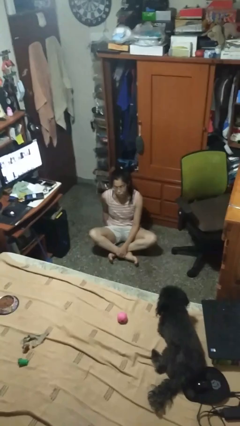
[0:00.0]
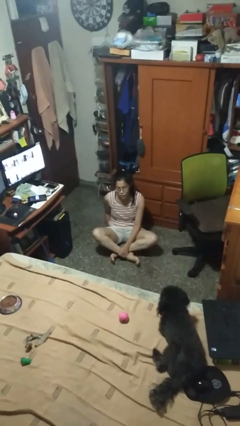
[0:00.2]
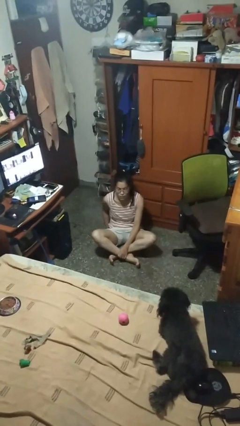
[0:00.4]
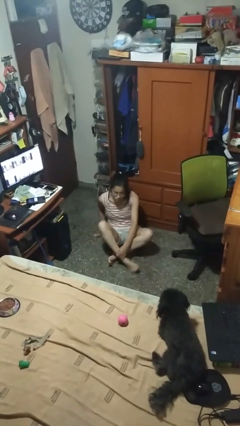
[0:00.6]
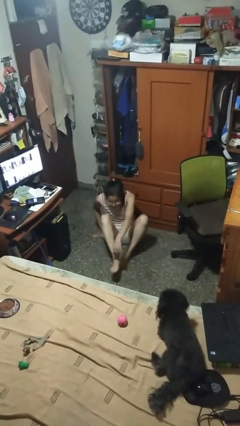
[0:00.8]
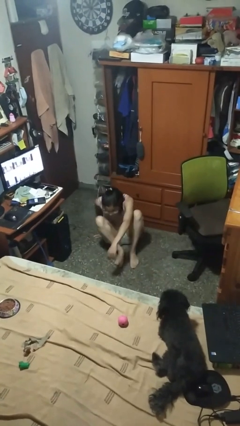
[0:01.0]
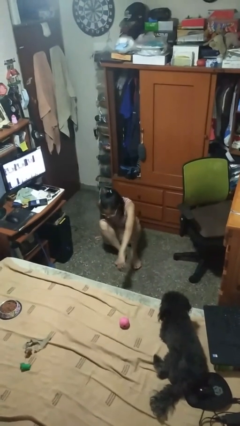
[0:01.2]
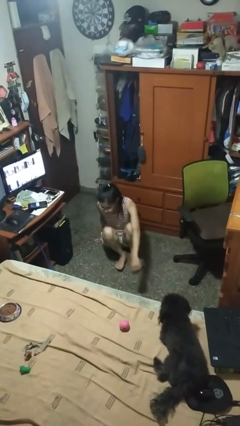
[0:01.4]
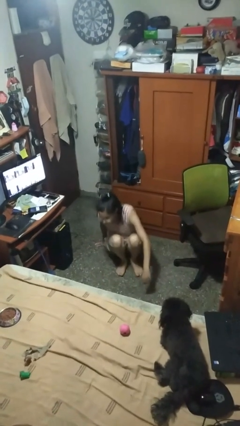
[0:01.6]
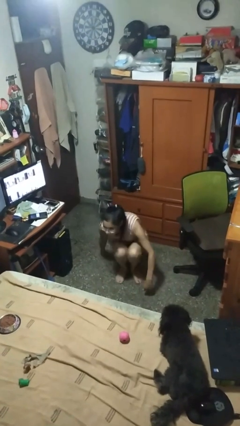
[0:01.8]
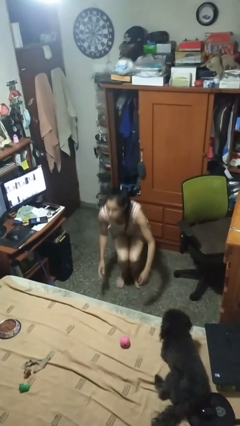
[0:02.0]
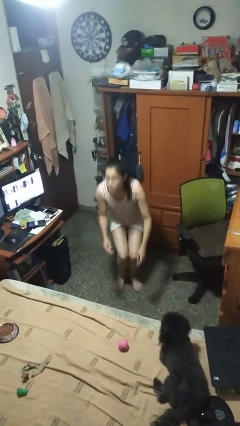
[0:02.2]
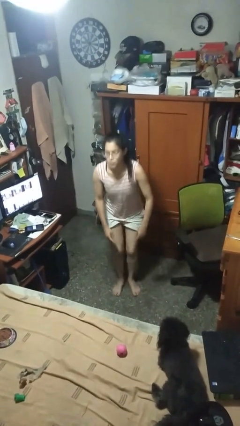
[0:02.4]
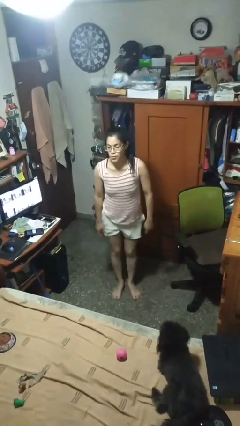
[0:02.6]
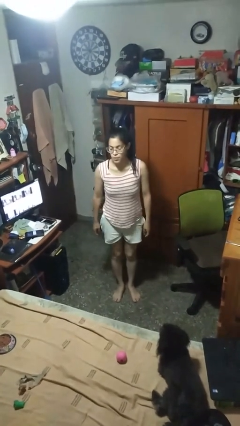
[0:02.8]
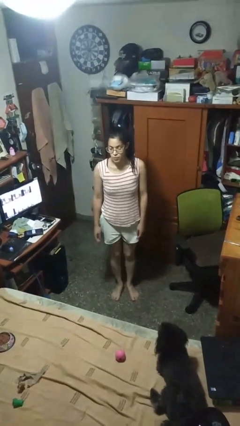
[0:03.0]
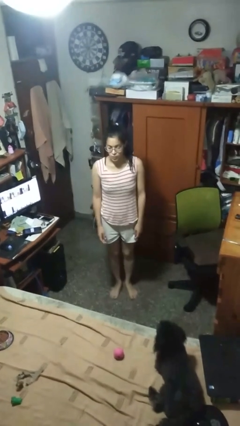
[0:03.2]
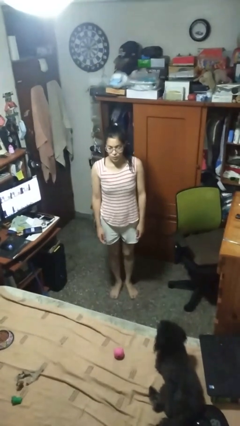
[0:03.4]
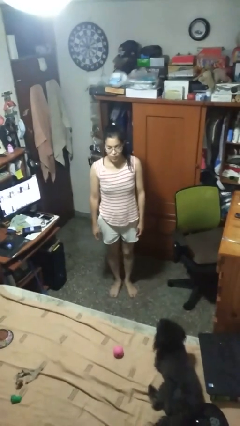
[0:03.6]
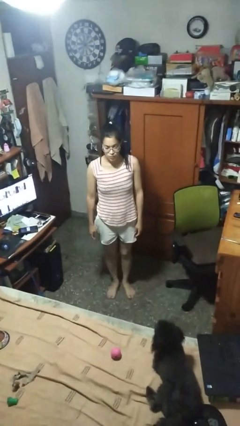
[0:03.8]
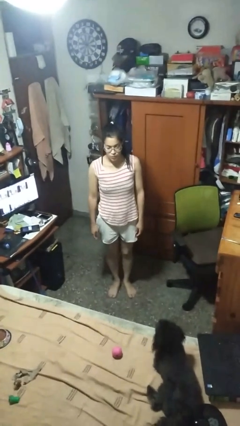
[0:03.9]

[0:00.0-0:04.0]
person stands up from floor

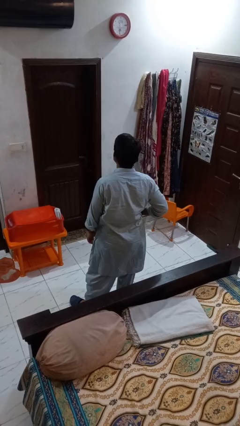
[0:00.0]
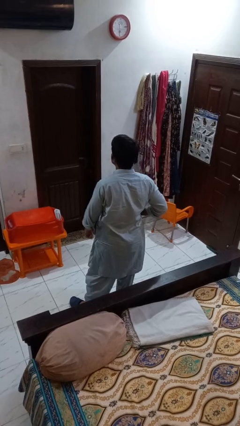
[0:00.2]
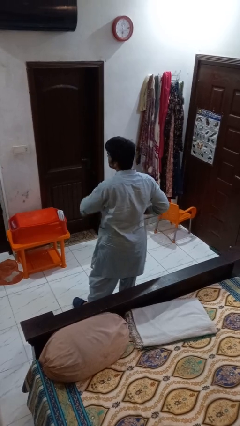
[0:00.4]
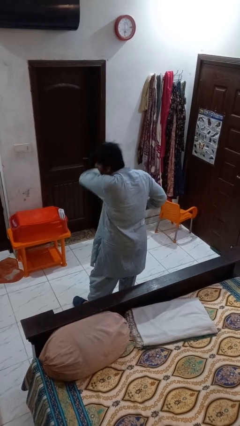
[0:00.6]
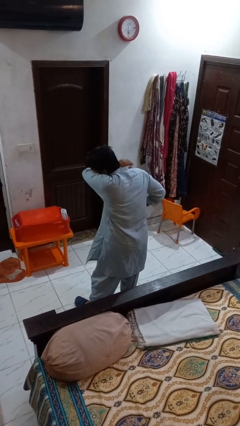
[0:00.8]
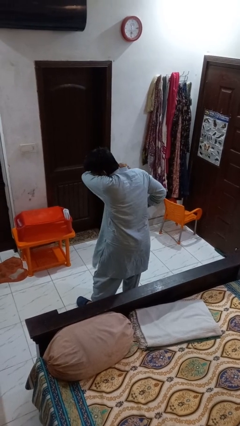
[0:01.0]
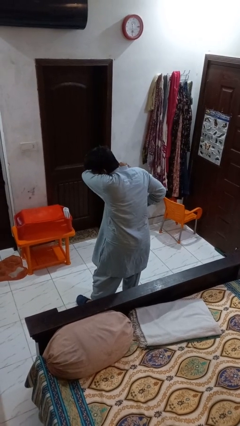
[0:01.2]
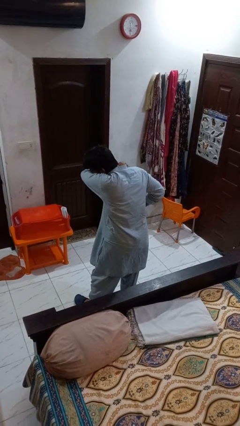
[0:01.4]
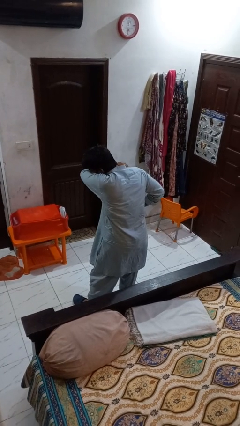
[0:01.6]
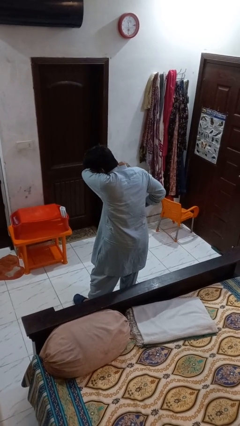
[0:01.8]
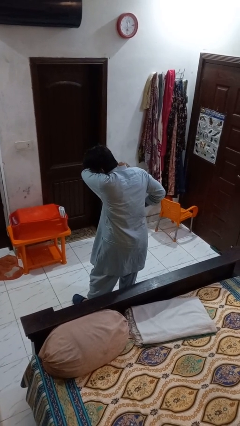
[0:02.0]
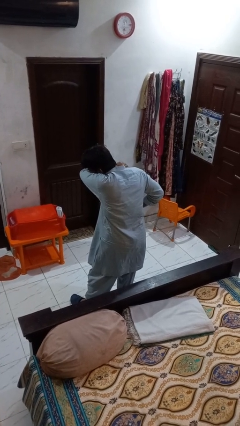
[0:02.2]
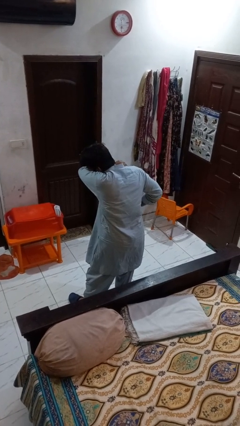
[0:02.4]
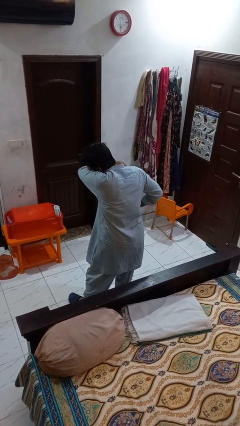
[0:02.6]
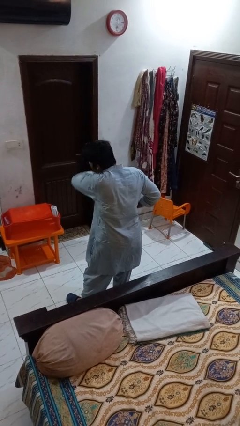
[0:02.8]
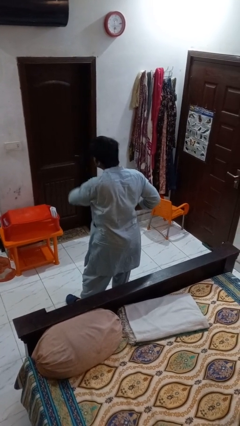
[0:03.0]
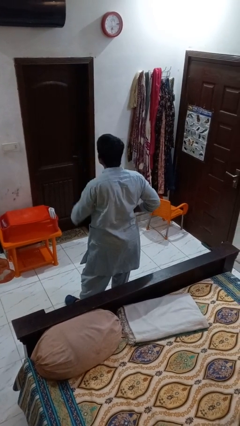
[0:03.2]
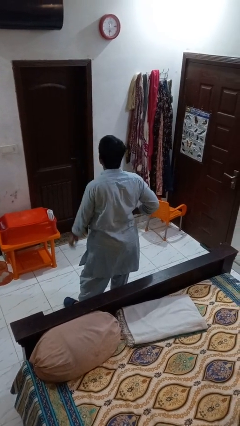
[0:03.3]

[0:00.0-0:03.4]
person sneezes into arm

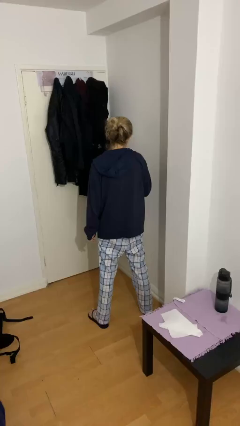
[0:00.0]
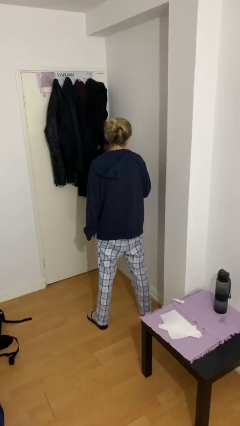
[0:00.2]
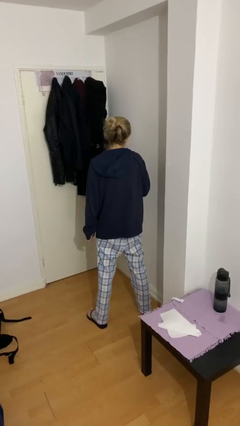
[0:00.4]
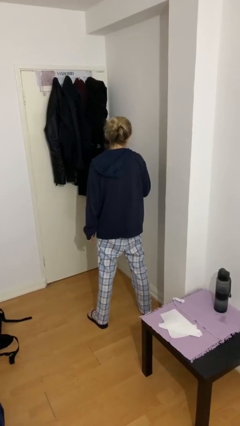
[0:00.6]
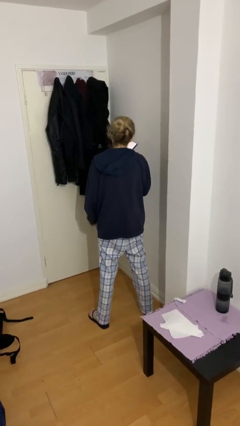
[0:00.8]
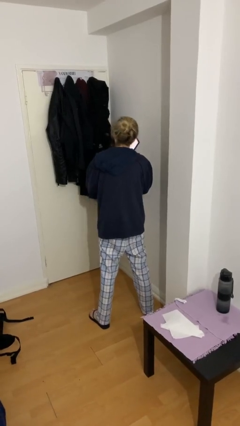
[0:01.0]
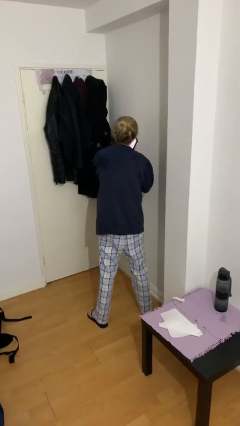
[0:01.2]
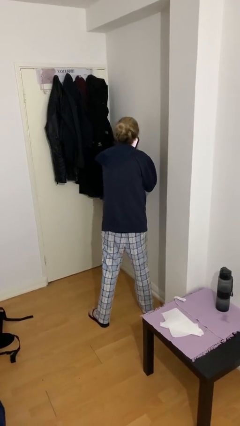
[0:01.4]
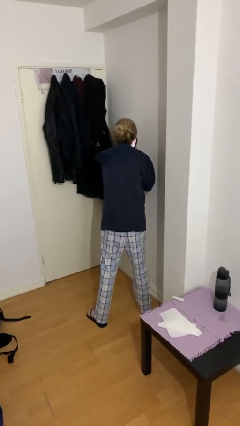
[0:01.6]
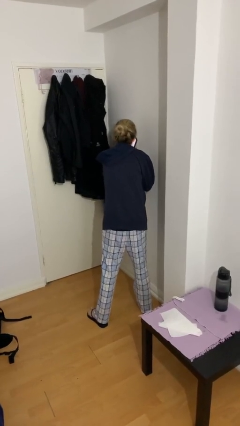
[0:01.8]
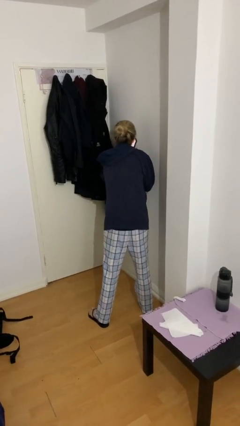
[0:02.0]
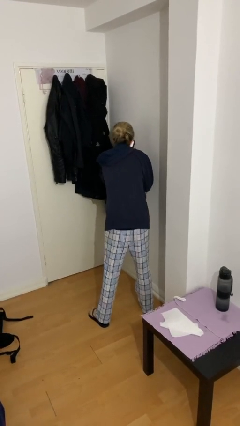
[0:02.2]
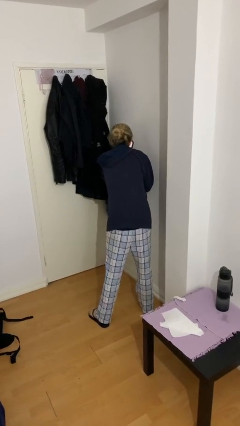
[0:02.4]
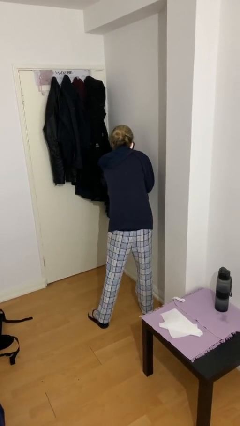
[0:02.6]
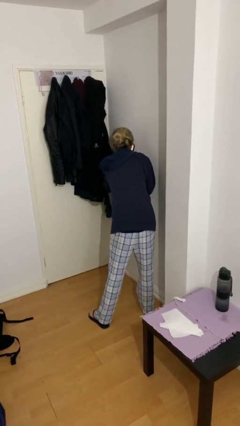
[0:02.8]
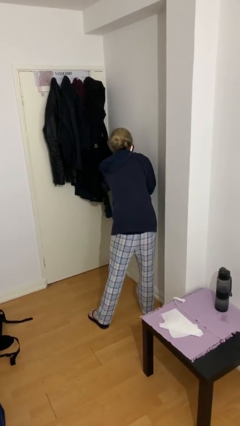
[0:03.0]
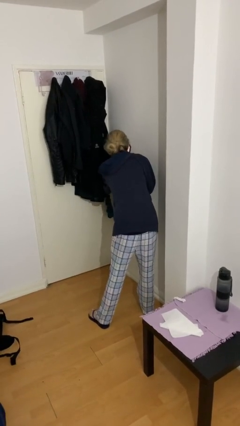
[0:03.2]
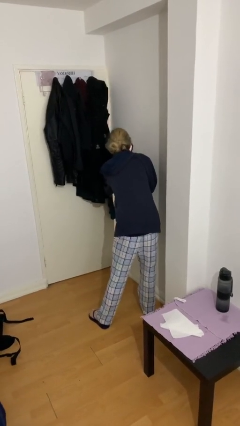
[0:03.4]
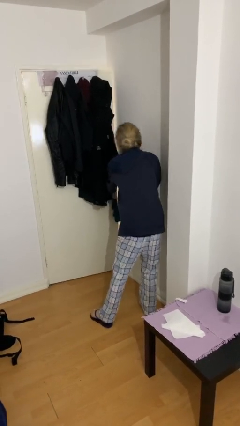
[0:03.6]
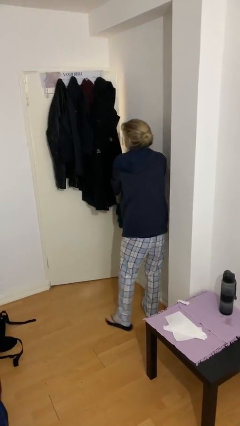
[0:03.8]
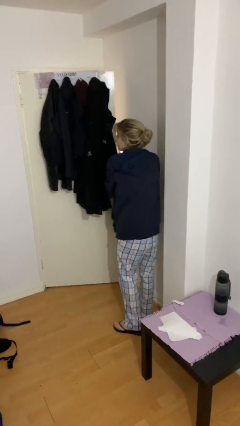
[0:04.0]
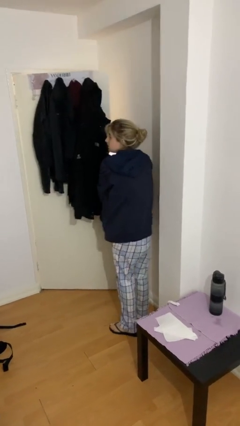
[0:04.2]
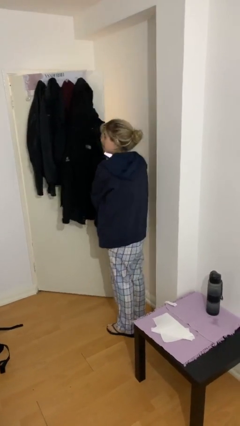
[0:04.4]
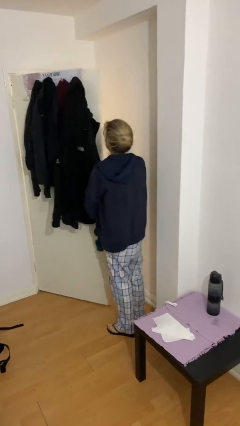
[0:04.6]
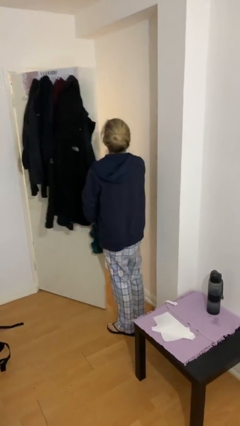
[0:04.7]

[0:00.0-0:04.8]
person opens facility door

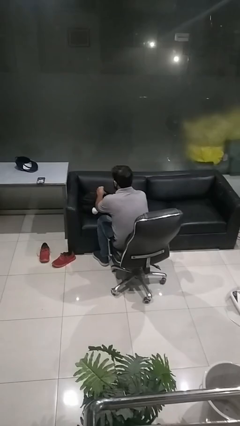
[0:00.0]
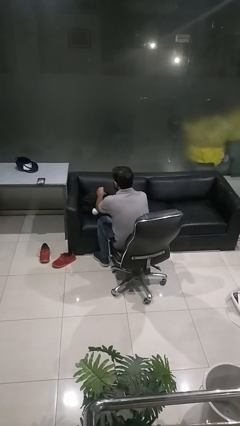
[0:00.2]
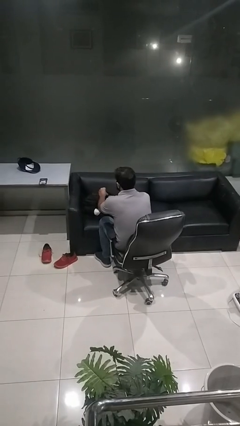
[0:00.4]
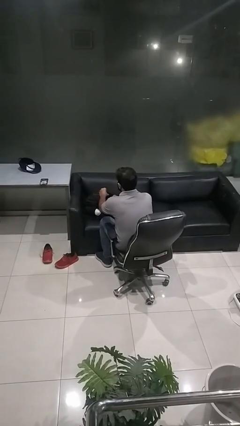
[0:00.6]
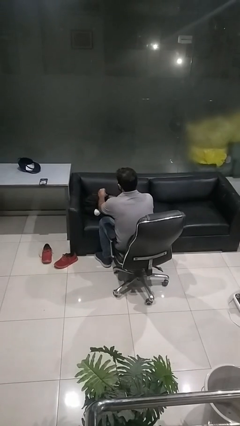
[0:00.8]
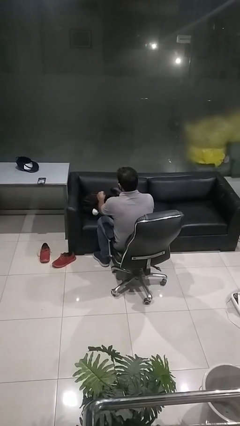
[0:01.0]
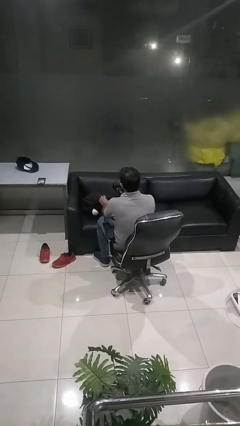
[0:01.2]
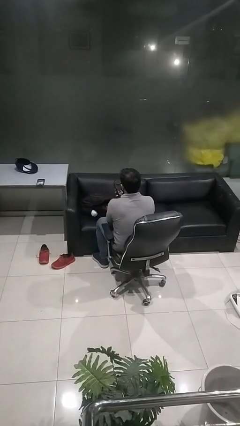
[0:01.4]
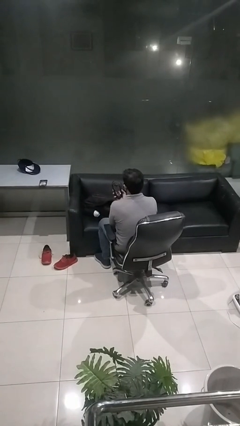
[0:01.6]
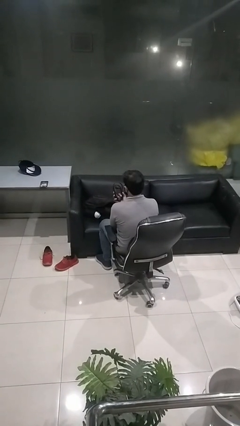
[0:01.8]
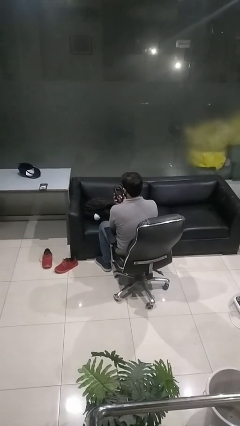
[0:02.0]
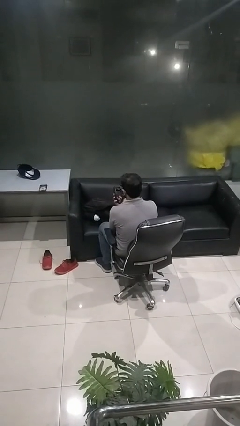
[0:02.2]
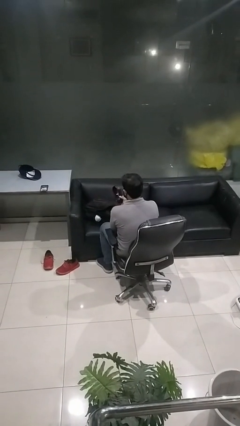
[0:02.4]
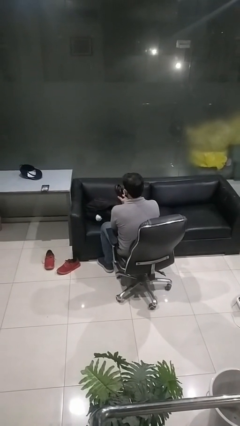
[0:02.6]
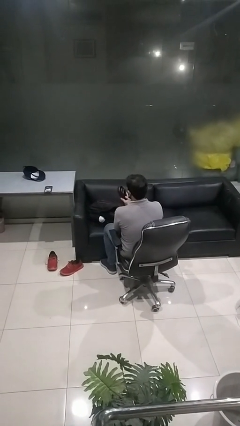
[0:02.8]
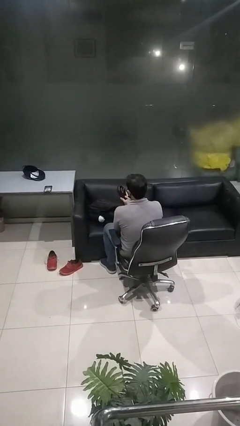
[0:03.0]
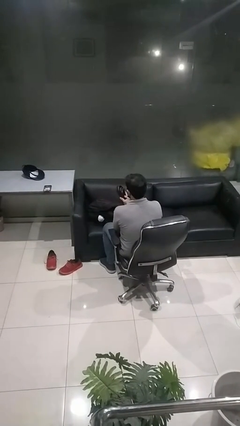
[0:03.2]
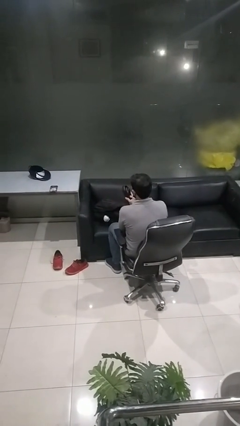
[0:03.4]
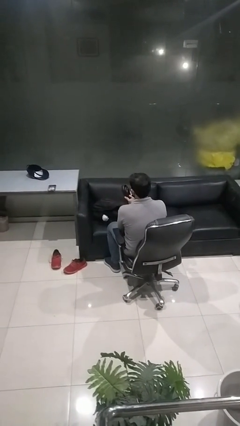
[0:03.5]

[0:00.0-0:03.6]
person takes object from backpack

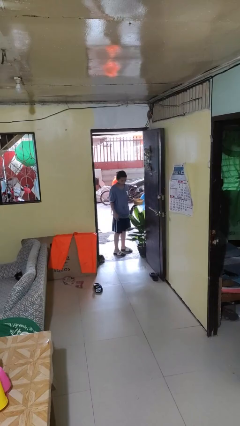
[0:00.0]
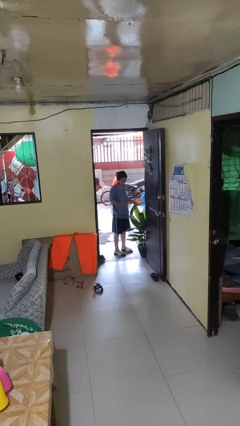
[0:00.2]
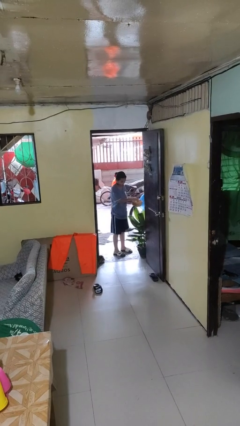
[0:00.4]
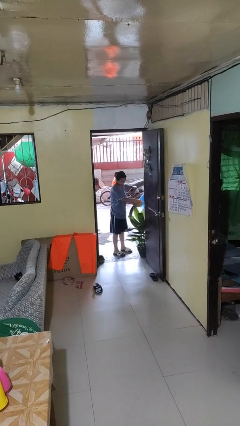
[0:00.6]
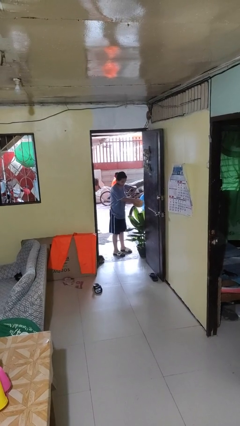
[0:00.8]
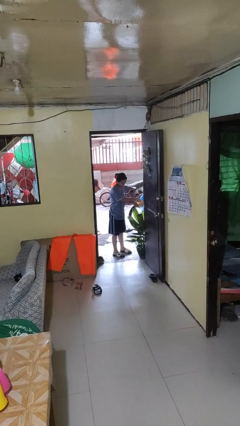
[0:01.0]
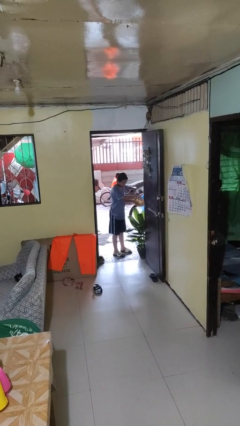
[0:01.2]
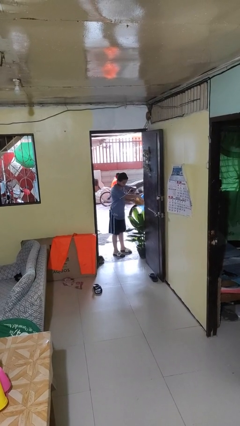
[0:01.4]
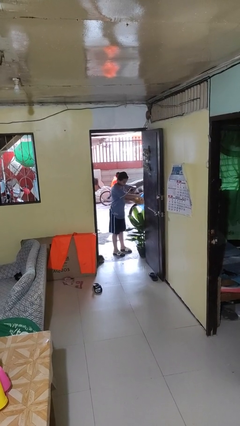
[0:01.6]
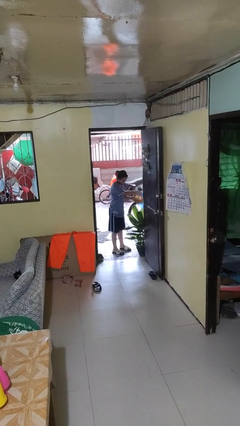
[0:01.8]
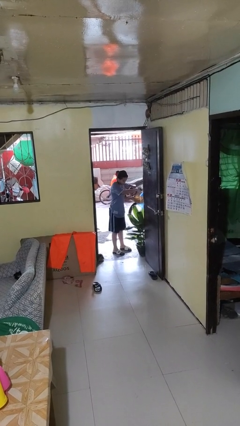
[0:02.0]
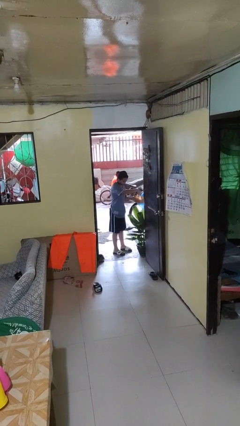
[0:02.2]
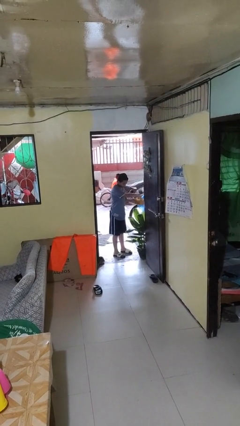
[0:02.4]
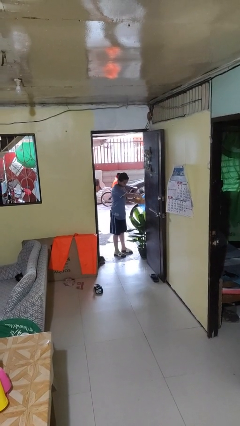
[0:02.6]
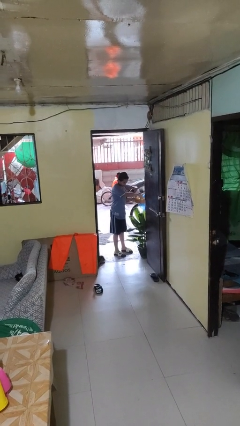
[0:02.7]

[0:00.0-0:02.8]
person waters houseplant
